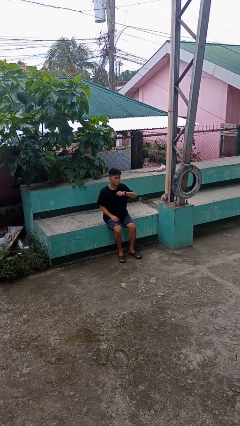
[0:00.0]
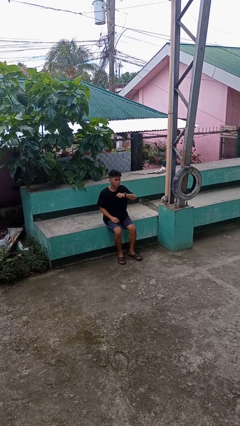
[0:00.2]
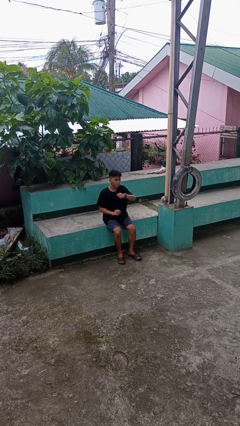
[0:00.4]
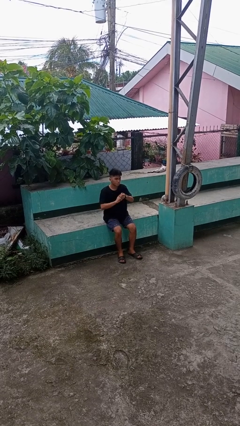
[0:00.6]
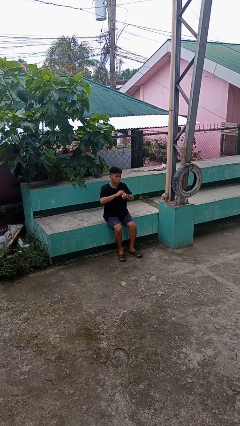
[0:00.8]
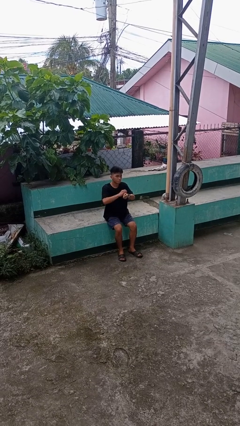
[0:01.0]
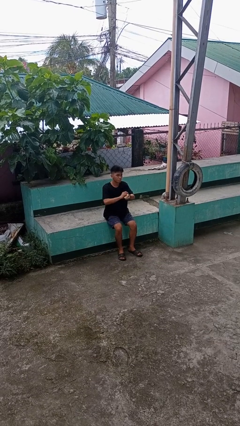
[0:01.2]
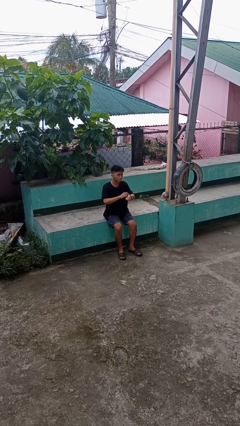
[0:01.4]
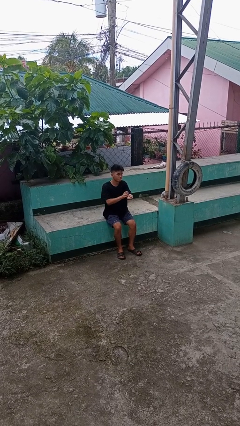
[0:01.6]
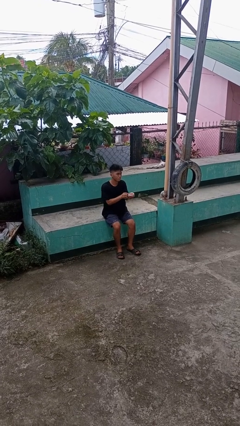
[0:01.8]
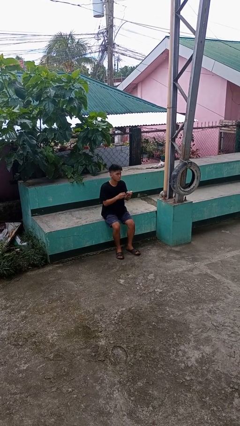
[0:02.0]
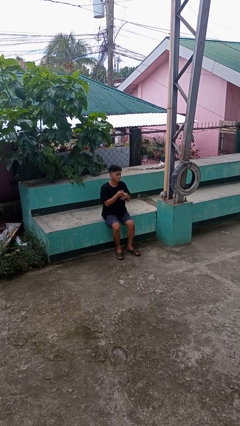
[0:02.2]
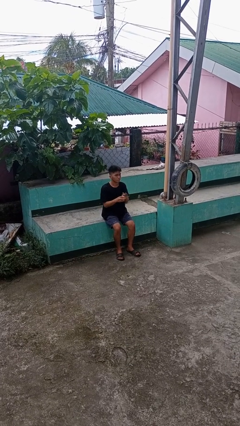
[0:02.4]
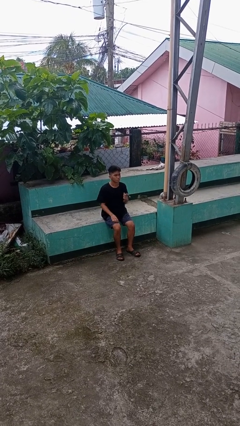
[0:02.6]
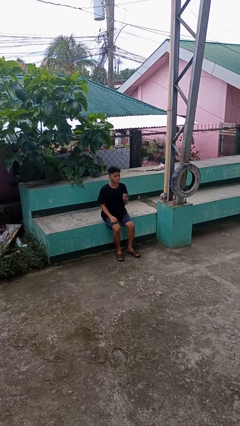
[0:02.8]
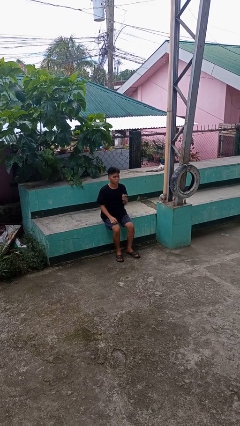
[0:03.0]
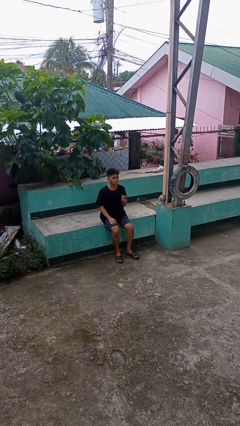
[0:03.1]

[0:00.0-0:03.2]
person takes off wristwatch

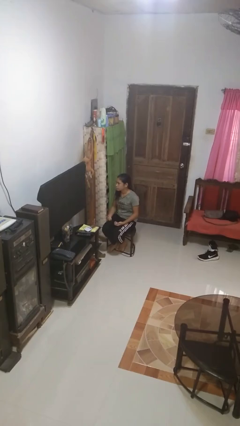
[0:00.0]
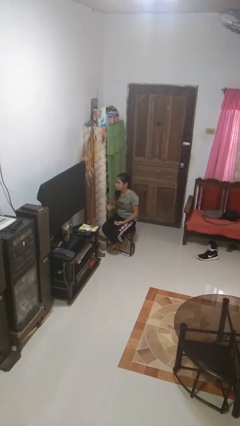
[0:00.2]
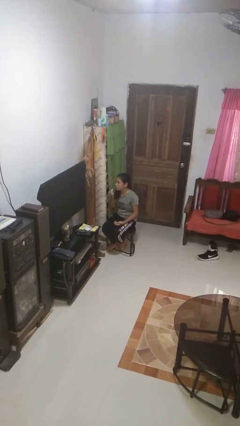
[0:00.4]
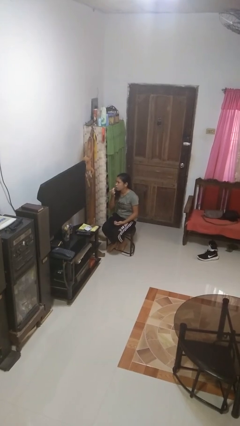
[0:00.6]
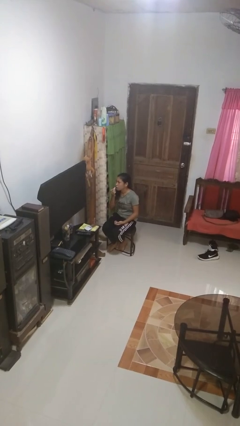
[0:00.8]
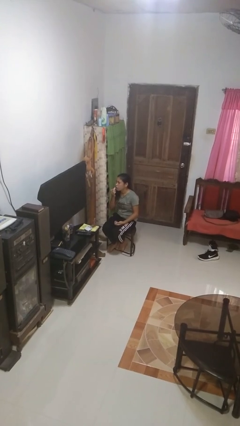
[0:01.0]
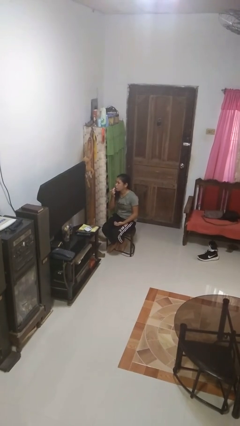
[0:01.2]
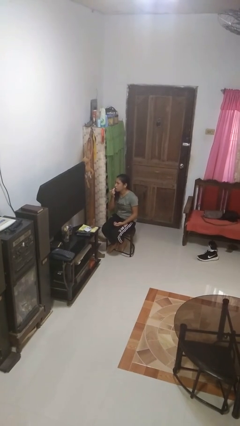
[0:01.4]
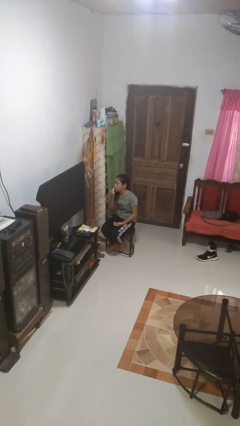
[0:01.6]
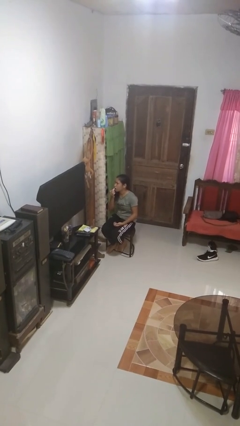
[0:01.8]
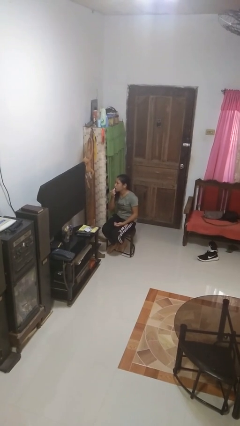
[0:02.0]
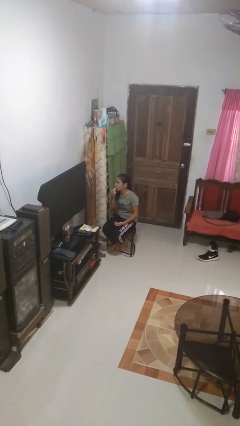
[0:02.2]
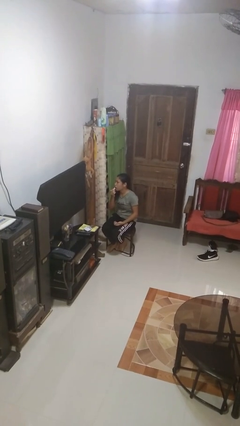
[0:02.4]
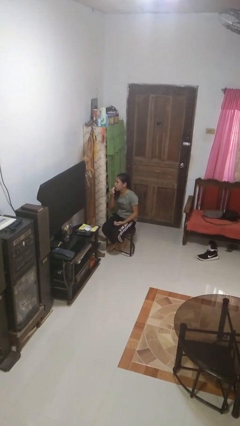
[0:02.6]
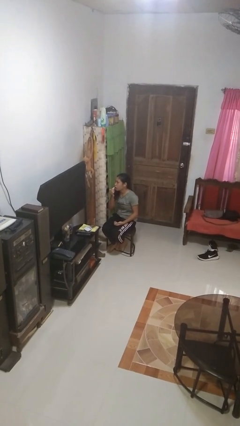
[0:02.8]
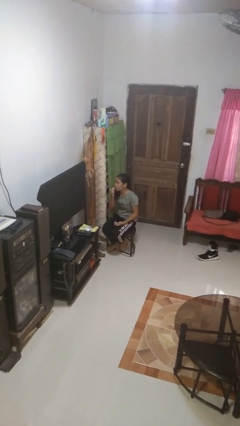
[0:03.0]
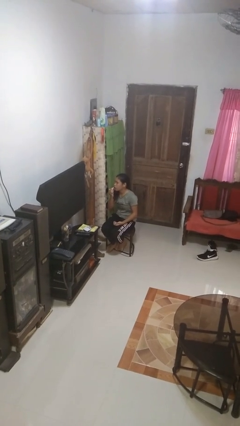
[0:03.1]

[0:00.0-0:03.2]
person applies lip makeup

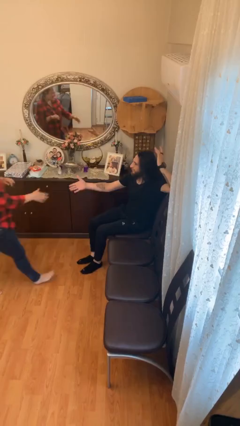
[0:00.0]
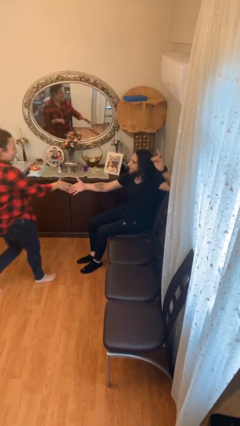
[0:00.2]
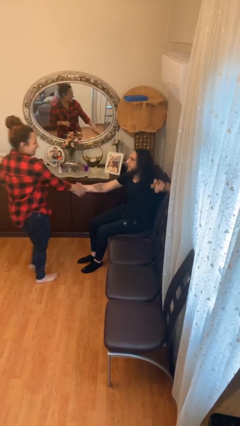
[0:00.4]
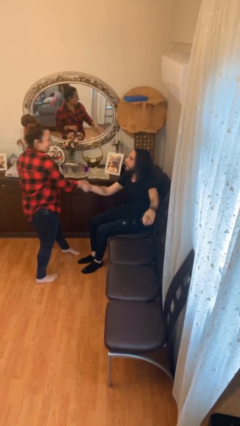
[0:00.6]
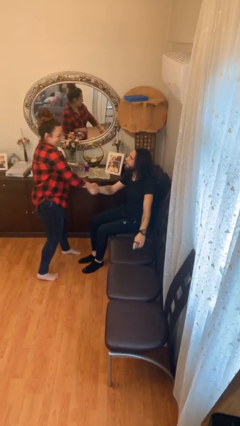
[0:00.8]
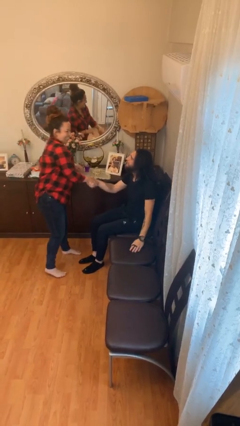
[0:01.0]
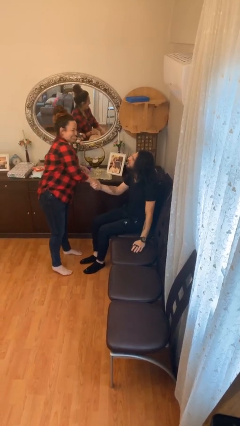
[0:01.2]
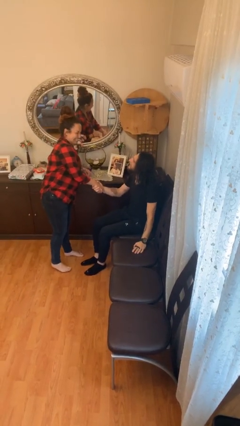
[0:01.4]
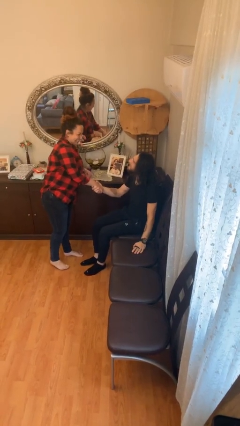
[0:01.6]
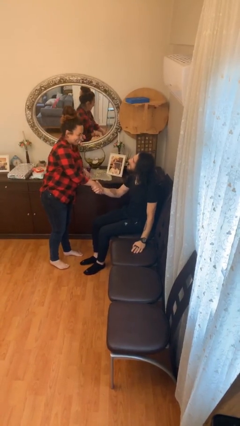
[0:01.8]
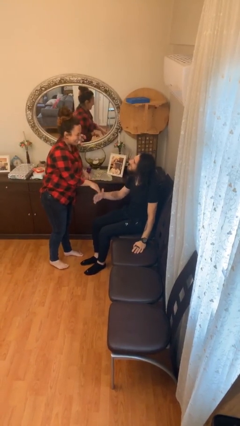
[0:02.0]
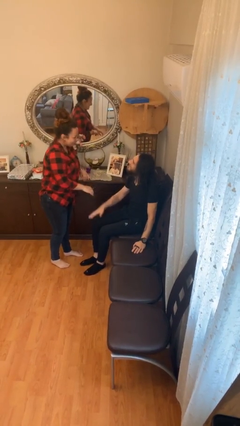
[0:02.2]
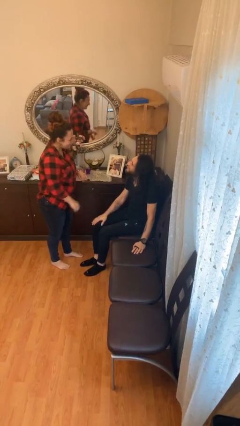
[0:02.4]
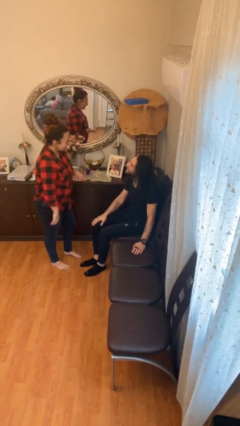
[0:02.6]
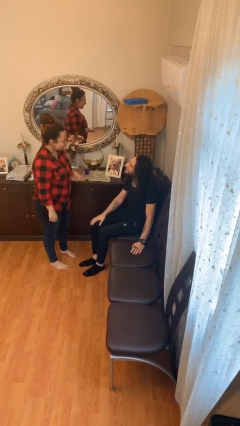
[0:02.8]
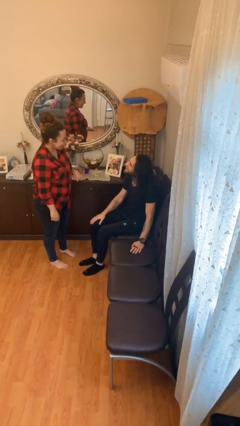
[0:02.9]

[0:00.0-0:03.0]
person shakes hand

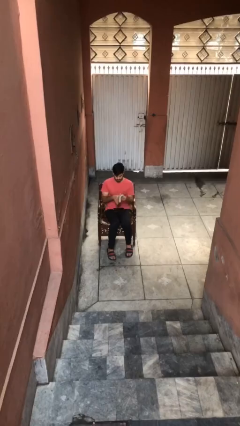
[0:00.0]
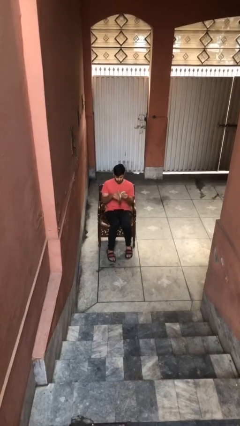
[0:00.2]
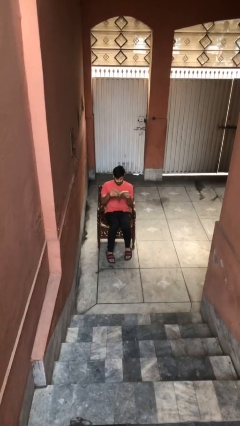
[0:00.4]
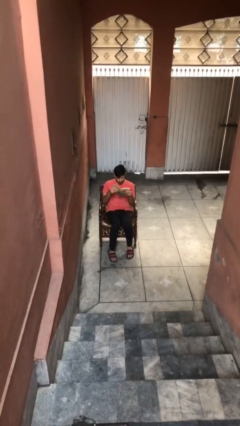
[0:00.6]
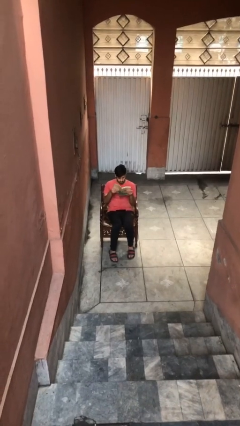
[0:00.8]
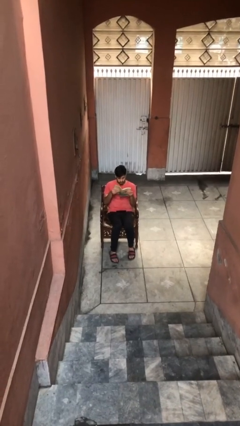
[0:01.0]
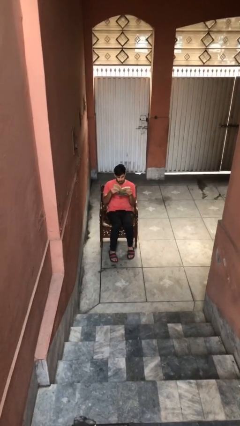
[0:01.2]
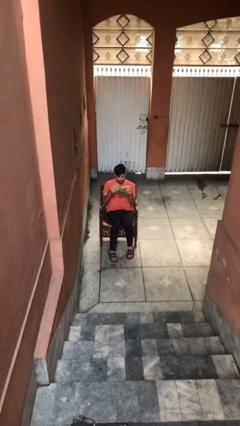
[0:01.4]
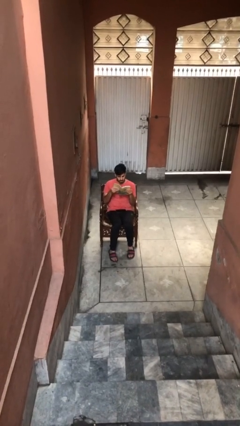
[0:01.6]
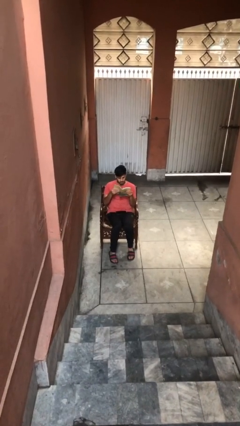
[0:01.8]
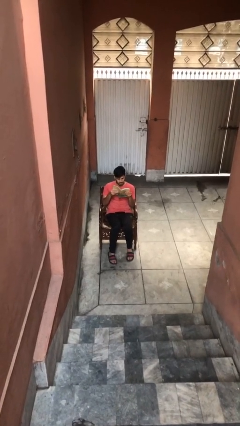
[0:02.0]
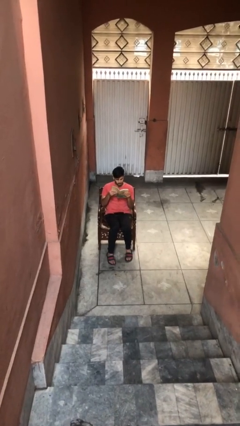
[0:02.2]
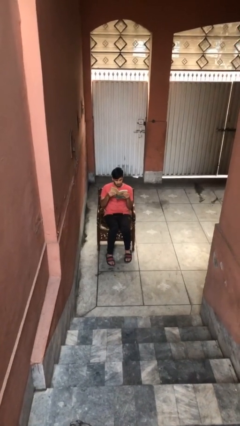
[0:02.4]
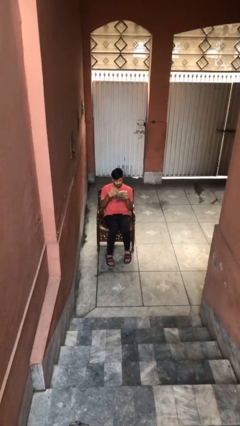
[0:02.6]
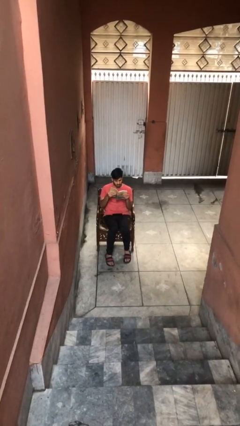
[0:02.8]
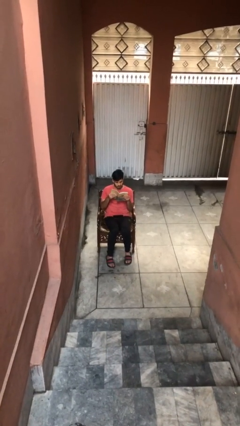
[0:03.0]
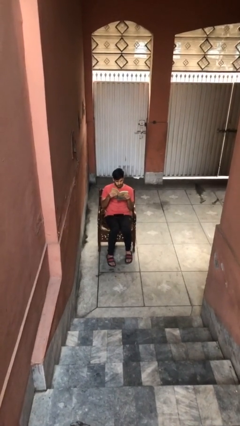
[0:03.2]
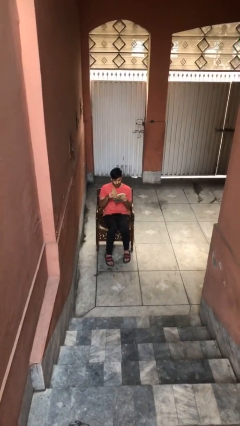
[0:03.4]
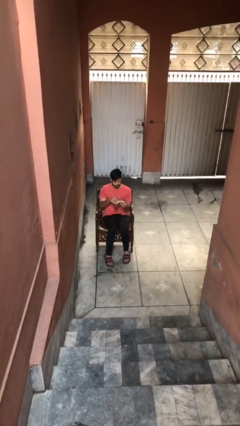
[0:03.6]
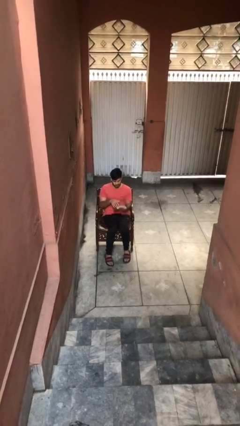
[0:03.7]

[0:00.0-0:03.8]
person reads document

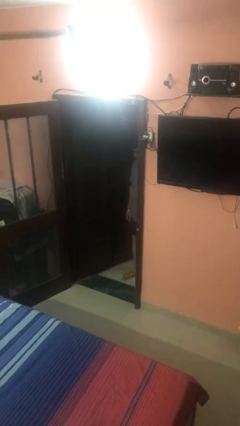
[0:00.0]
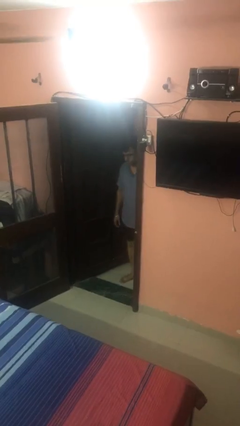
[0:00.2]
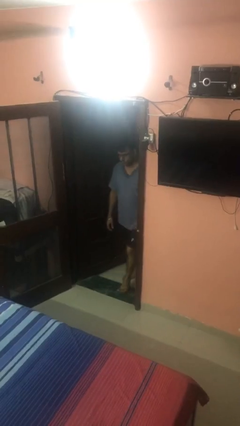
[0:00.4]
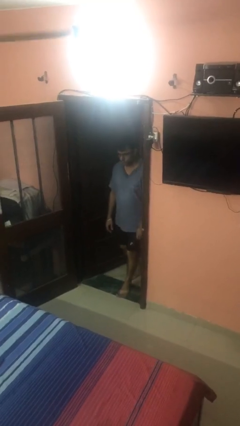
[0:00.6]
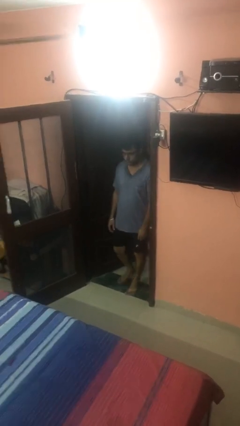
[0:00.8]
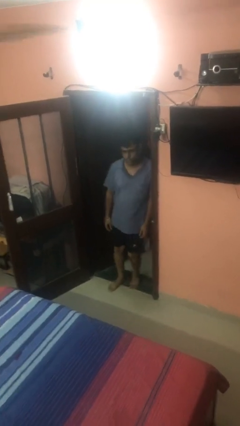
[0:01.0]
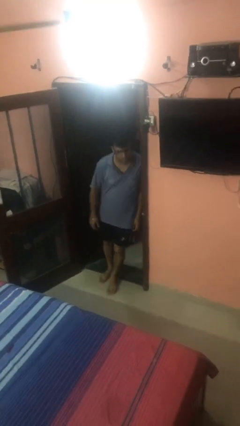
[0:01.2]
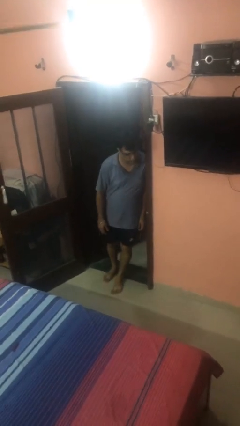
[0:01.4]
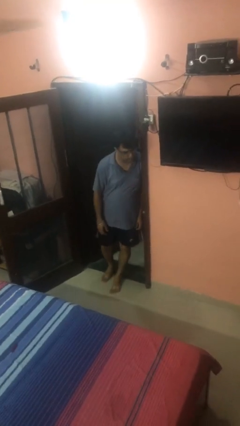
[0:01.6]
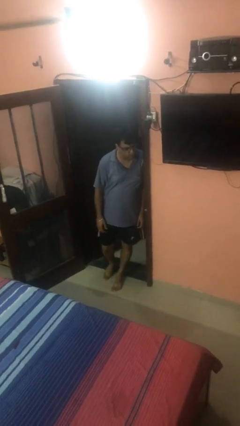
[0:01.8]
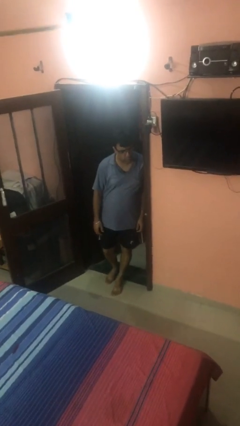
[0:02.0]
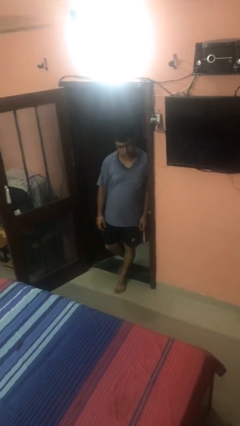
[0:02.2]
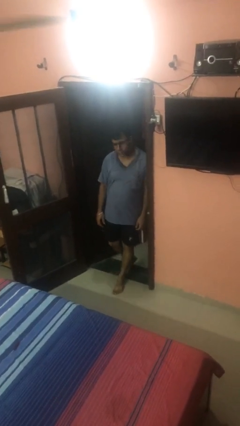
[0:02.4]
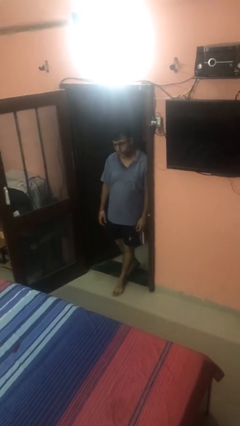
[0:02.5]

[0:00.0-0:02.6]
person bumps into wall

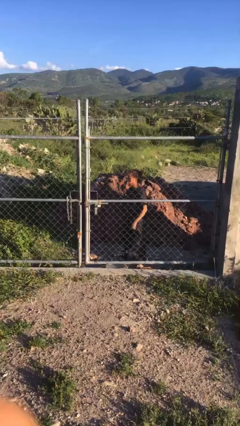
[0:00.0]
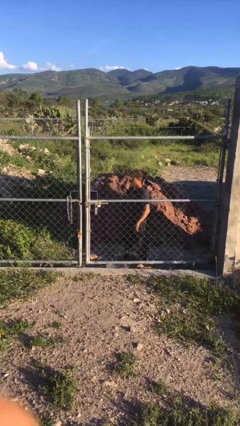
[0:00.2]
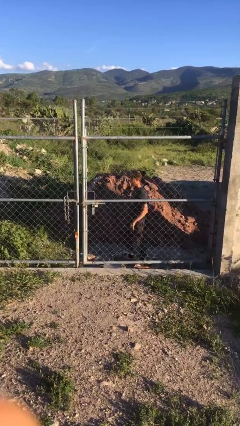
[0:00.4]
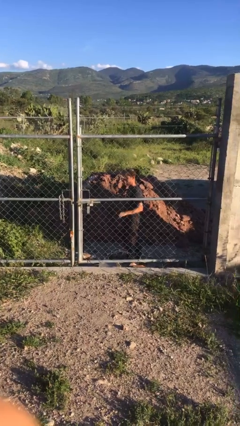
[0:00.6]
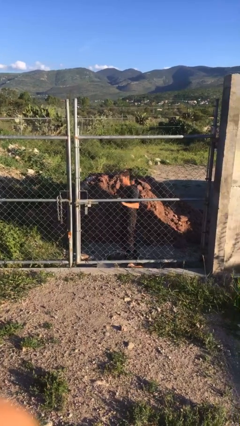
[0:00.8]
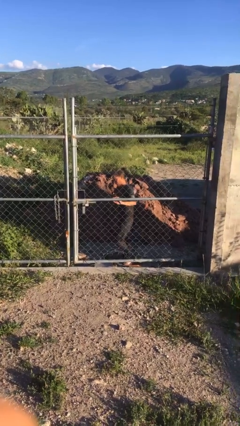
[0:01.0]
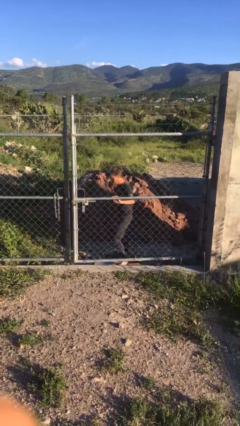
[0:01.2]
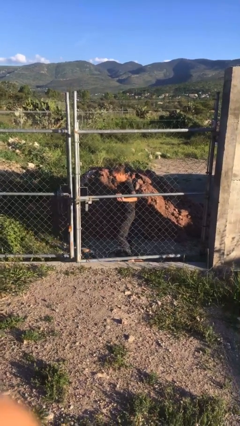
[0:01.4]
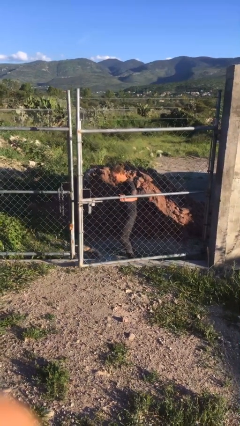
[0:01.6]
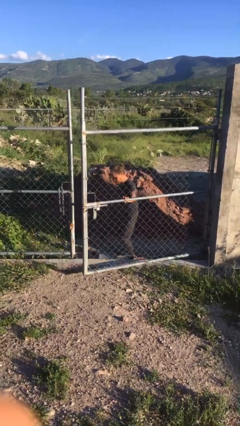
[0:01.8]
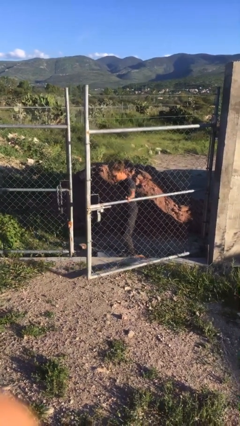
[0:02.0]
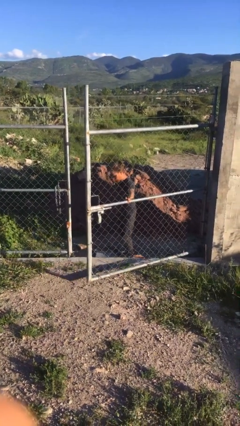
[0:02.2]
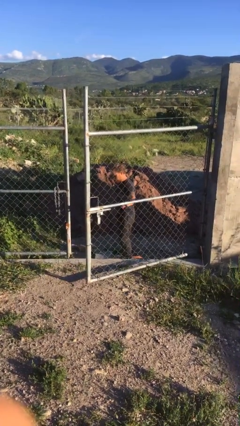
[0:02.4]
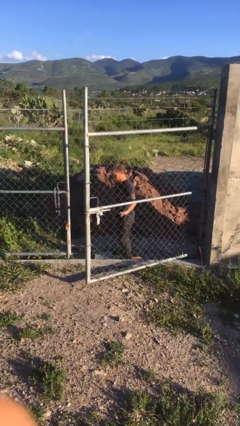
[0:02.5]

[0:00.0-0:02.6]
person opens gate
